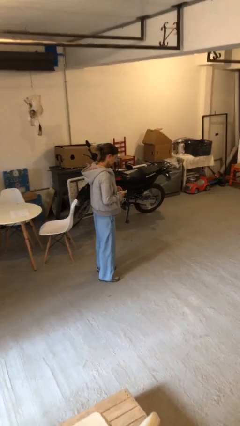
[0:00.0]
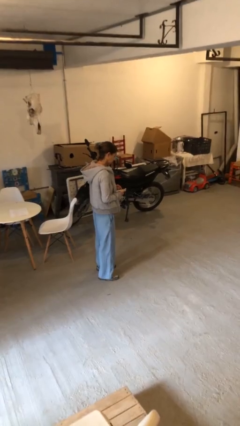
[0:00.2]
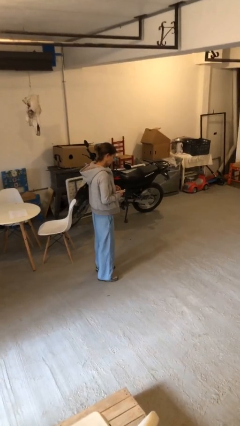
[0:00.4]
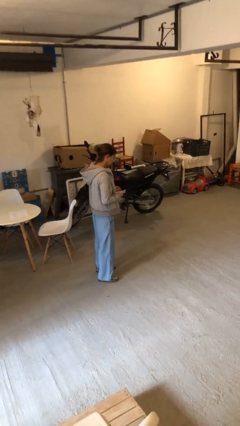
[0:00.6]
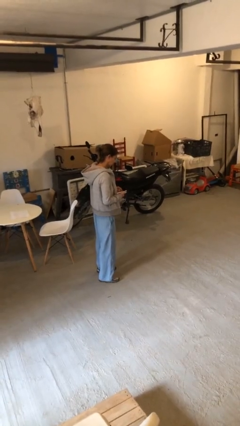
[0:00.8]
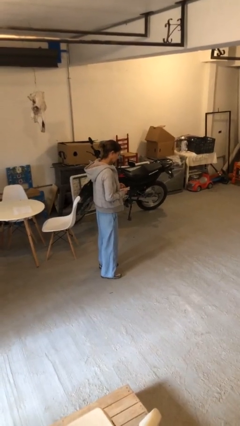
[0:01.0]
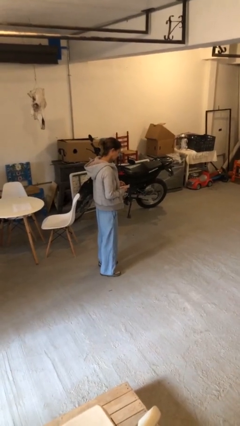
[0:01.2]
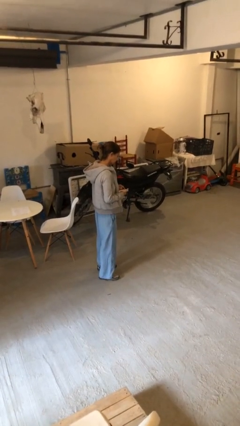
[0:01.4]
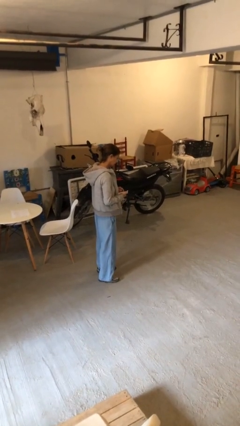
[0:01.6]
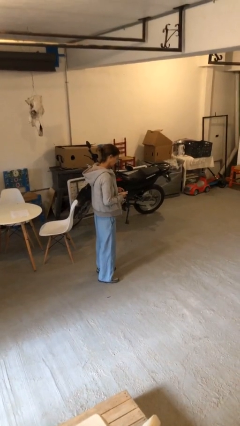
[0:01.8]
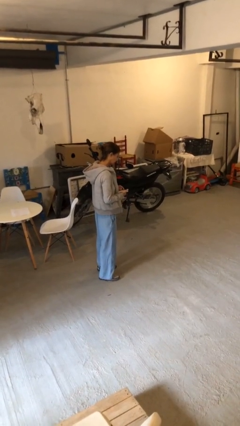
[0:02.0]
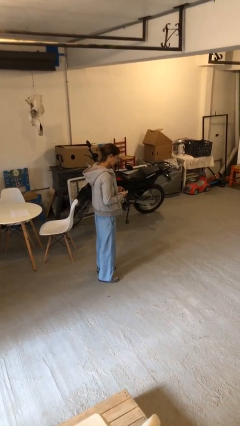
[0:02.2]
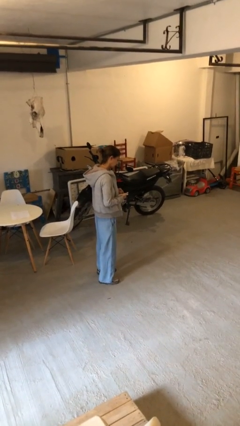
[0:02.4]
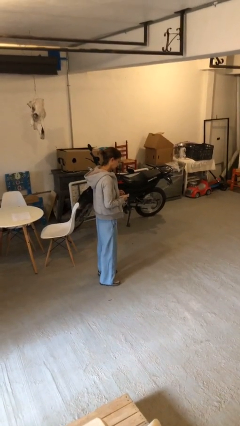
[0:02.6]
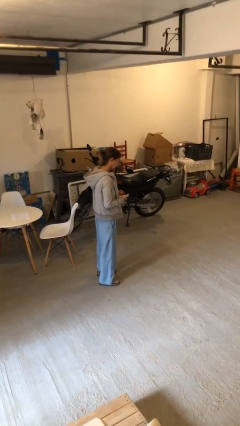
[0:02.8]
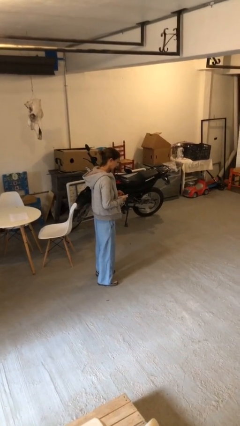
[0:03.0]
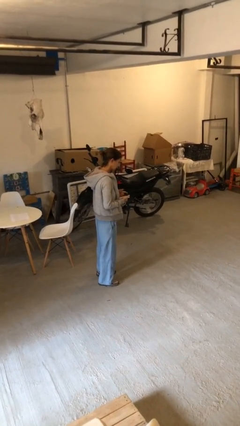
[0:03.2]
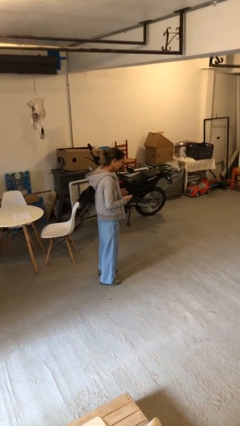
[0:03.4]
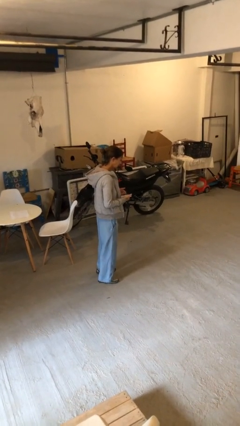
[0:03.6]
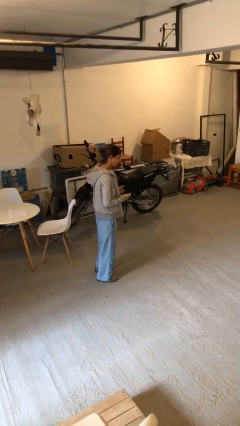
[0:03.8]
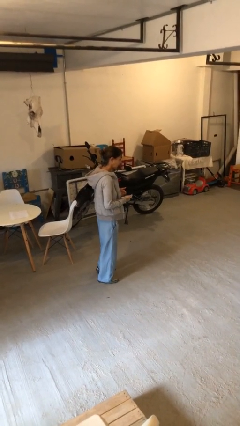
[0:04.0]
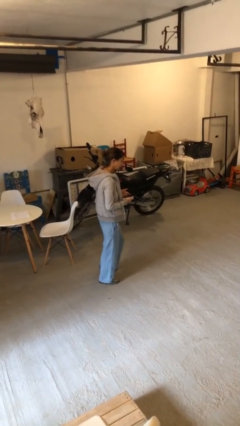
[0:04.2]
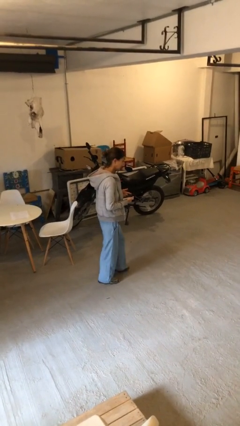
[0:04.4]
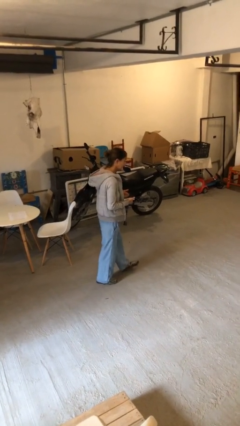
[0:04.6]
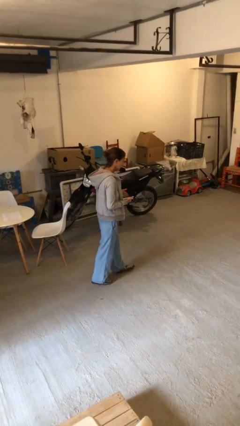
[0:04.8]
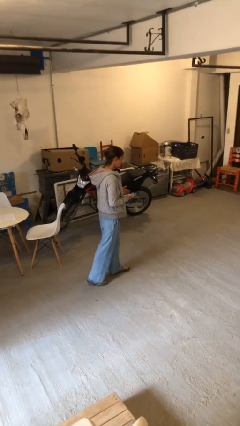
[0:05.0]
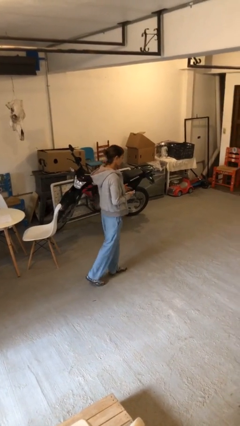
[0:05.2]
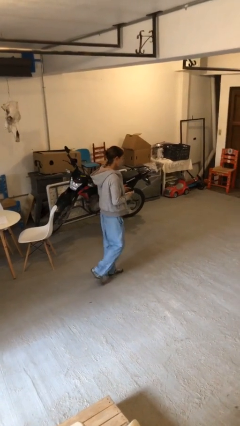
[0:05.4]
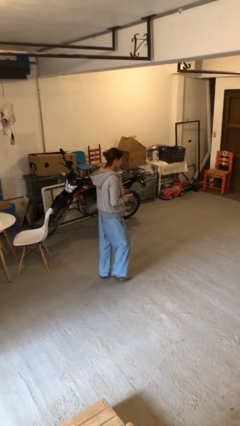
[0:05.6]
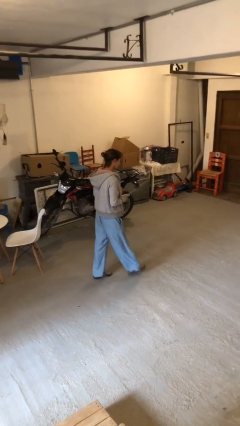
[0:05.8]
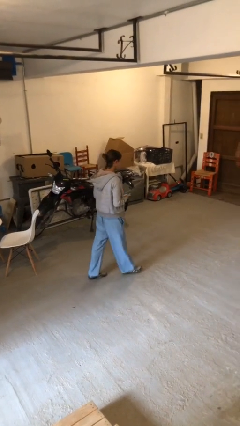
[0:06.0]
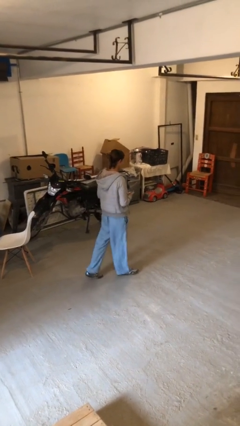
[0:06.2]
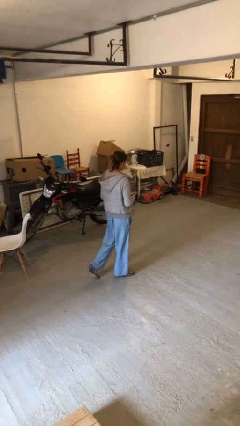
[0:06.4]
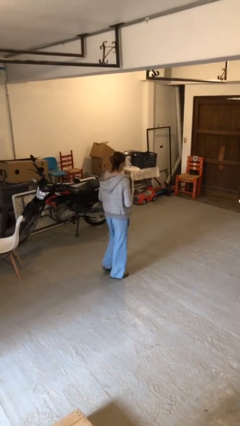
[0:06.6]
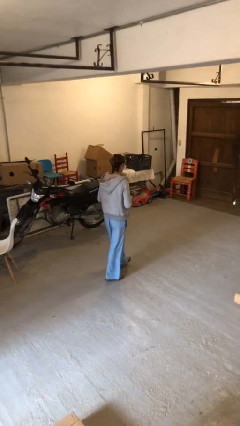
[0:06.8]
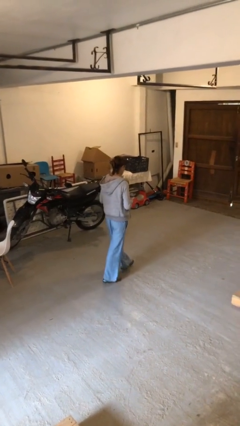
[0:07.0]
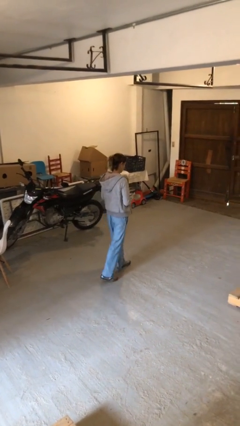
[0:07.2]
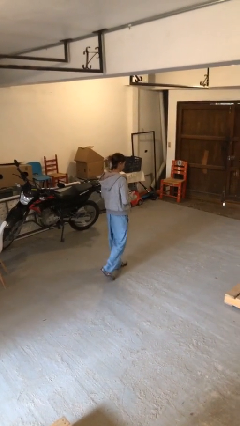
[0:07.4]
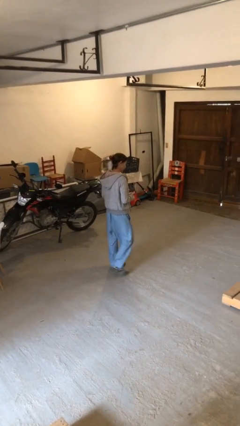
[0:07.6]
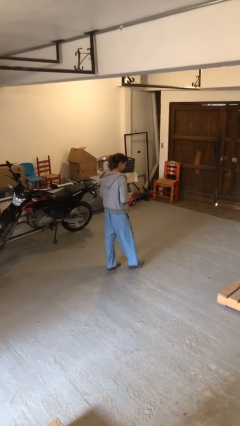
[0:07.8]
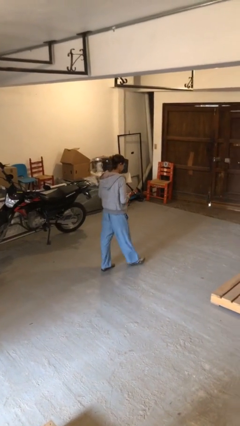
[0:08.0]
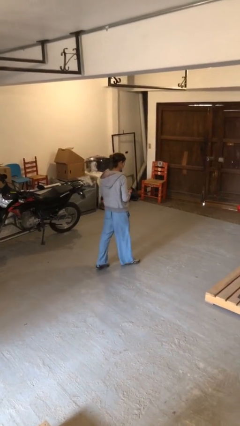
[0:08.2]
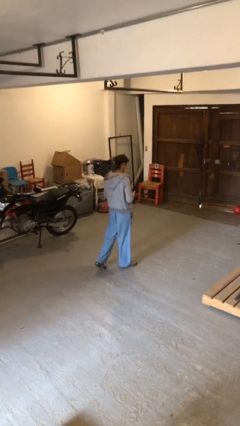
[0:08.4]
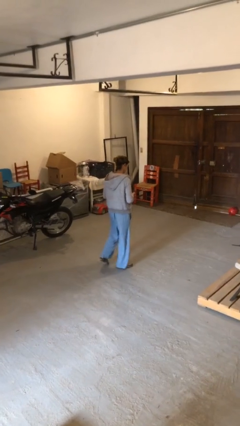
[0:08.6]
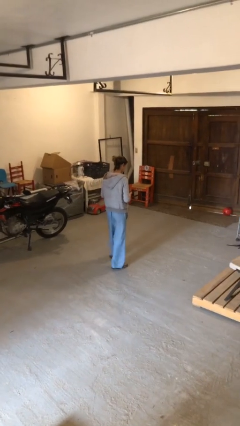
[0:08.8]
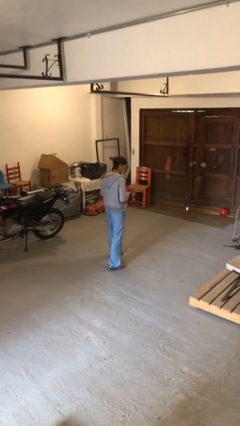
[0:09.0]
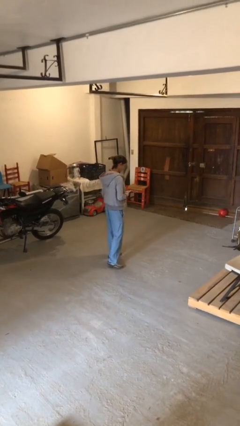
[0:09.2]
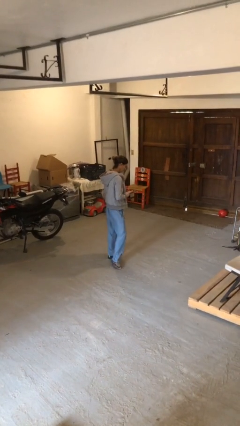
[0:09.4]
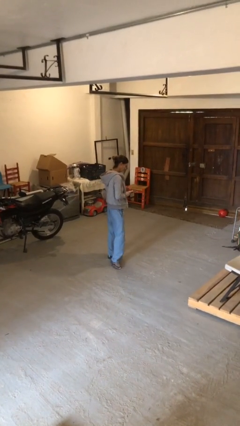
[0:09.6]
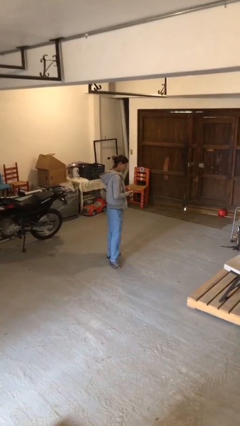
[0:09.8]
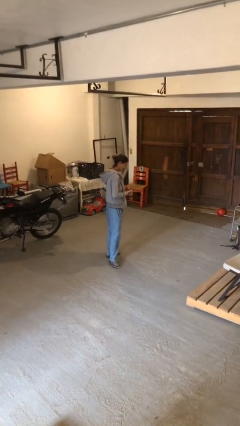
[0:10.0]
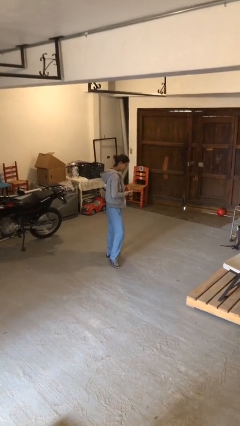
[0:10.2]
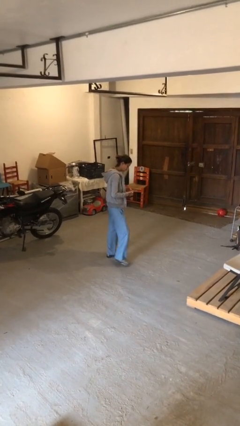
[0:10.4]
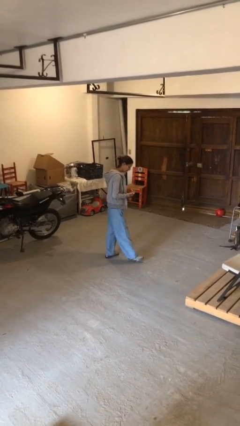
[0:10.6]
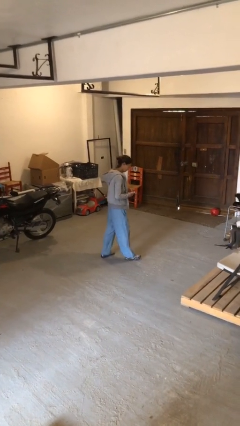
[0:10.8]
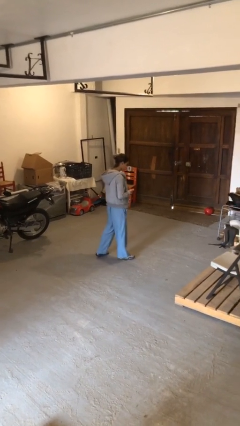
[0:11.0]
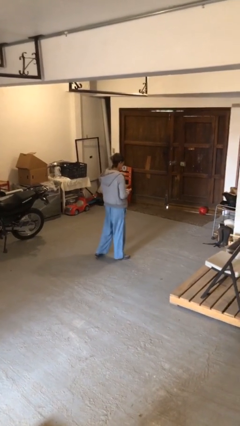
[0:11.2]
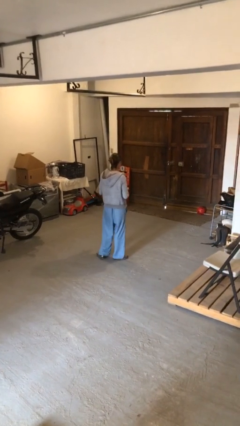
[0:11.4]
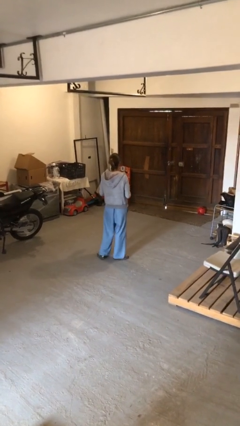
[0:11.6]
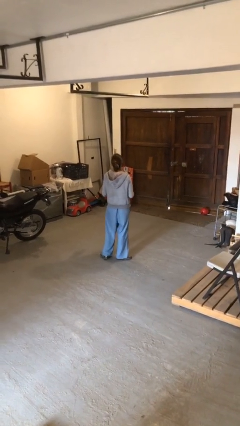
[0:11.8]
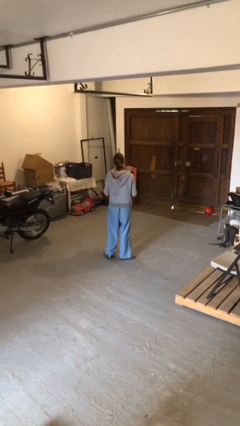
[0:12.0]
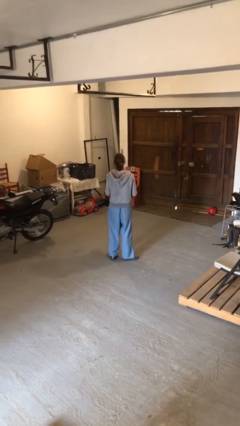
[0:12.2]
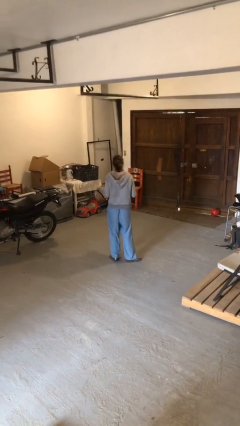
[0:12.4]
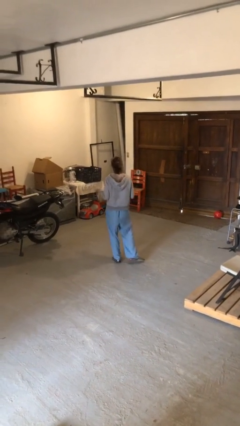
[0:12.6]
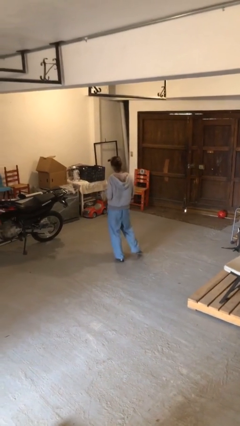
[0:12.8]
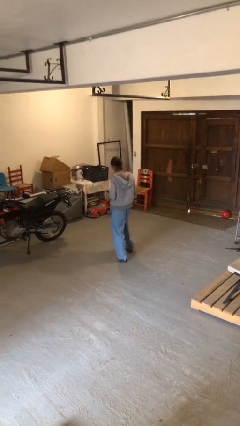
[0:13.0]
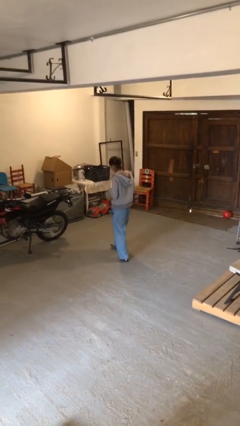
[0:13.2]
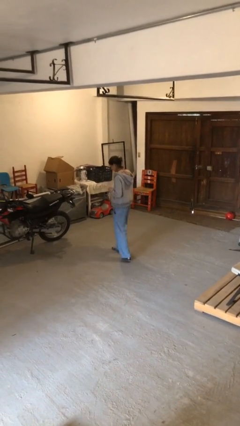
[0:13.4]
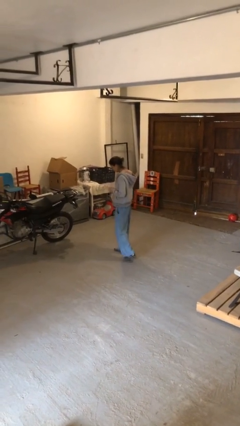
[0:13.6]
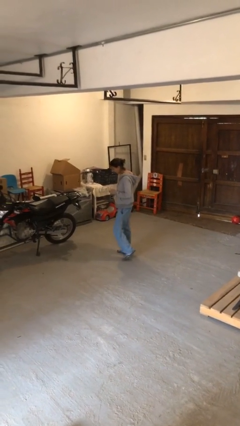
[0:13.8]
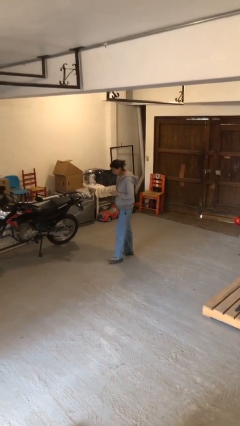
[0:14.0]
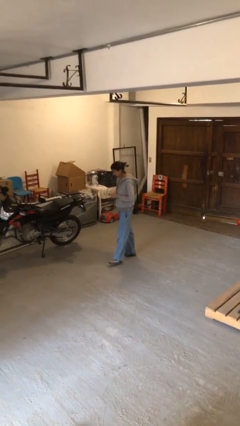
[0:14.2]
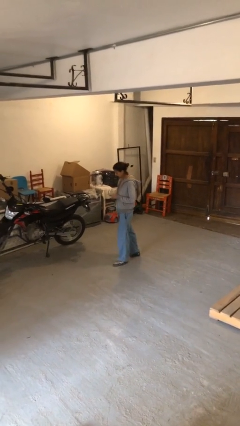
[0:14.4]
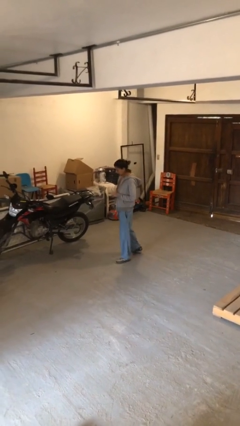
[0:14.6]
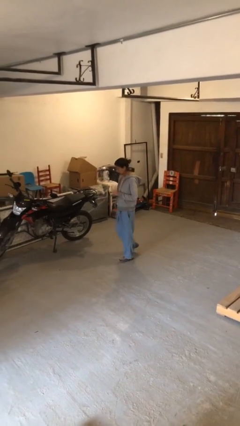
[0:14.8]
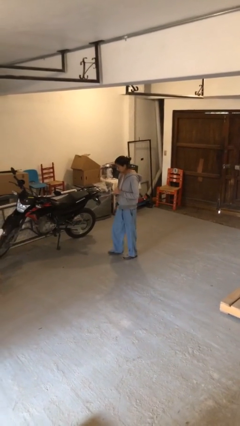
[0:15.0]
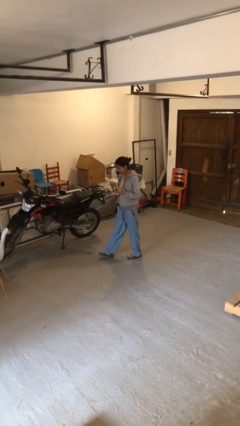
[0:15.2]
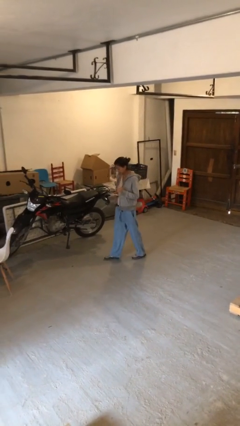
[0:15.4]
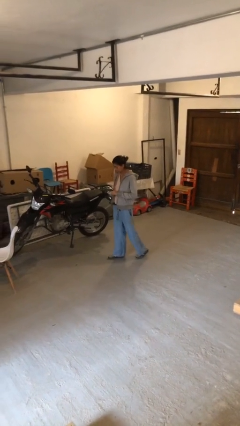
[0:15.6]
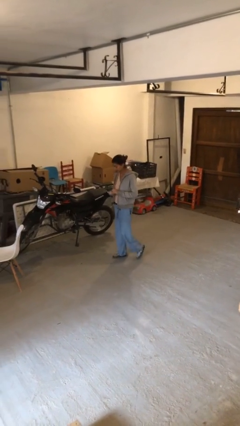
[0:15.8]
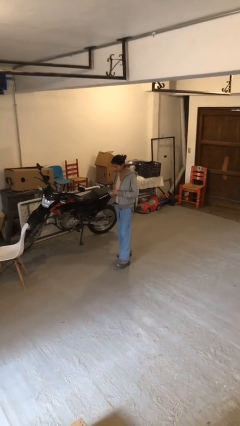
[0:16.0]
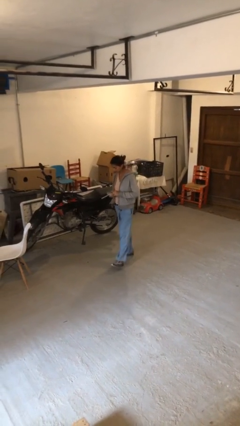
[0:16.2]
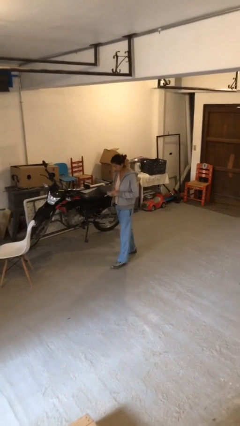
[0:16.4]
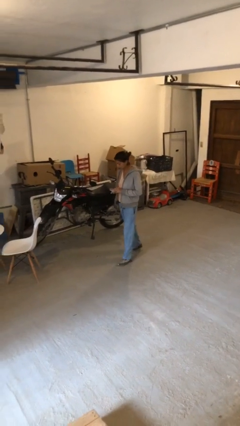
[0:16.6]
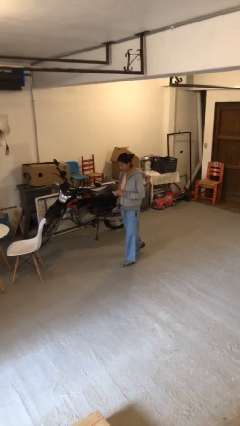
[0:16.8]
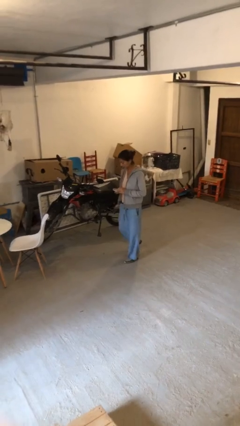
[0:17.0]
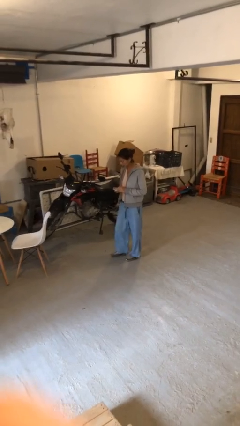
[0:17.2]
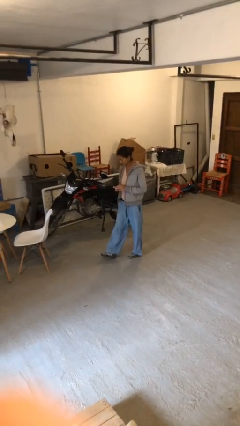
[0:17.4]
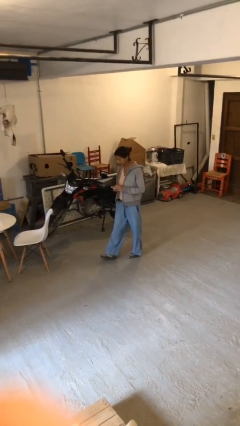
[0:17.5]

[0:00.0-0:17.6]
person texts on phone

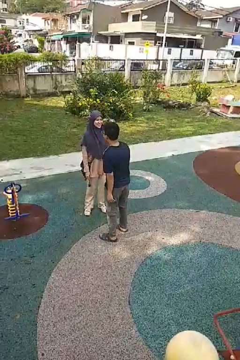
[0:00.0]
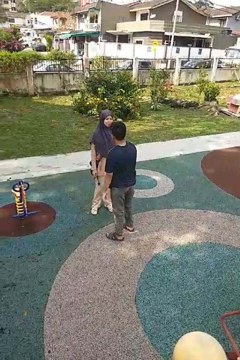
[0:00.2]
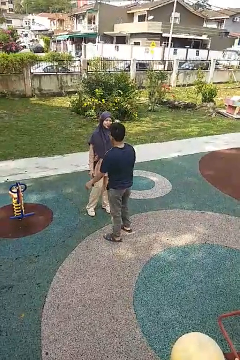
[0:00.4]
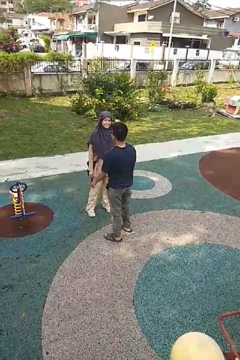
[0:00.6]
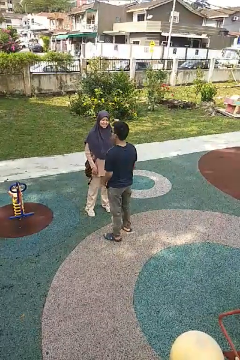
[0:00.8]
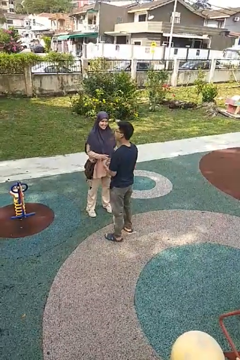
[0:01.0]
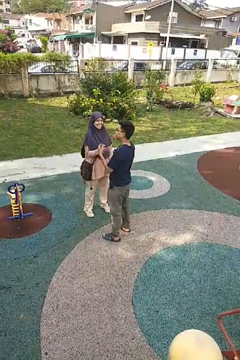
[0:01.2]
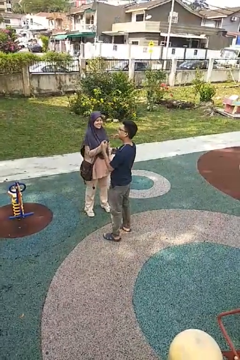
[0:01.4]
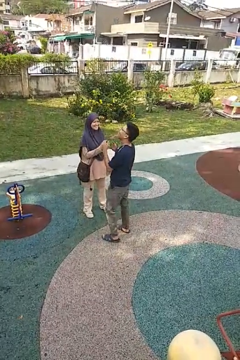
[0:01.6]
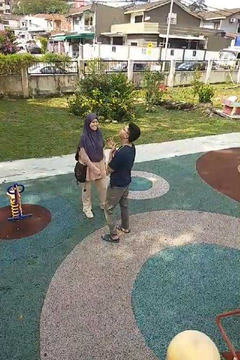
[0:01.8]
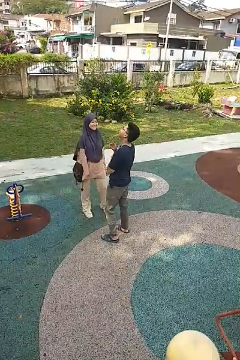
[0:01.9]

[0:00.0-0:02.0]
person laughs with person
